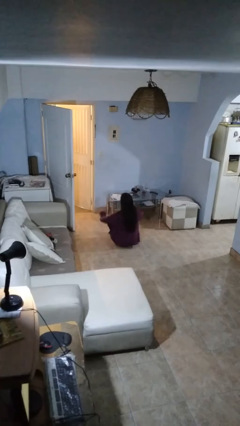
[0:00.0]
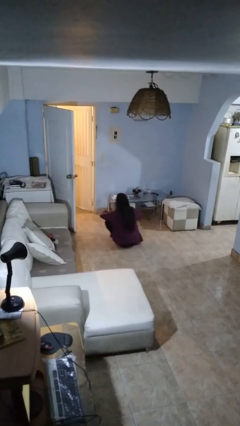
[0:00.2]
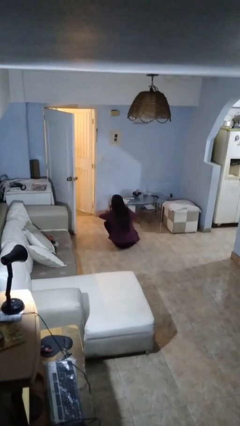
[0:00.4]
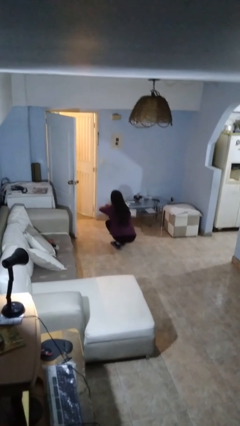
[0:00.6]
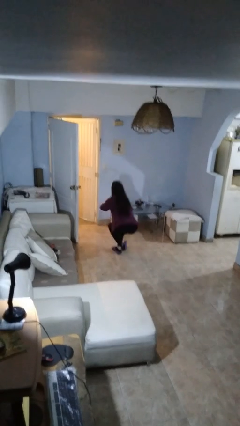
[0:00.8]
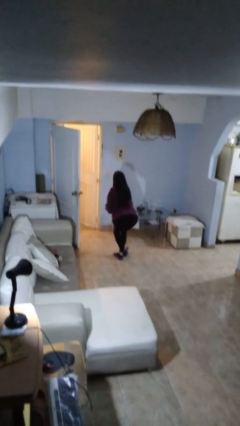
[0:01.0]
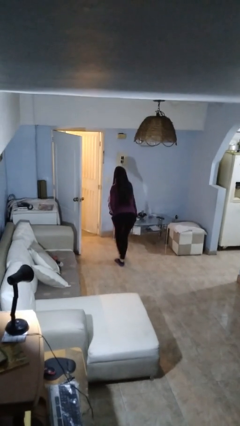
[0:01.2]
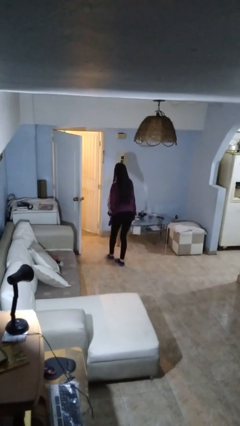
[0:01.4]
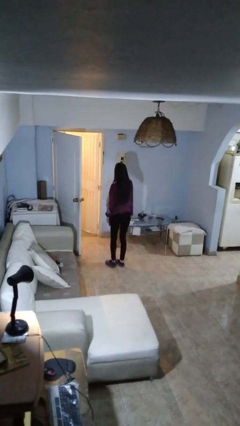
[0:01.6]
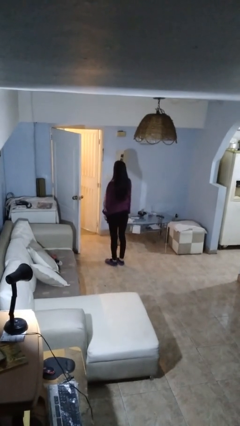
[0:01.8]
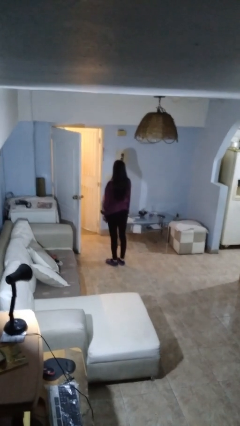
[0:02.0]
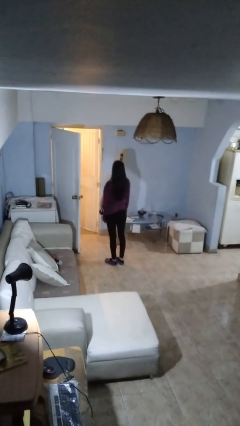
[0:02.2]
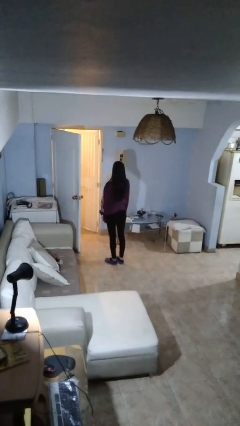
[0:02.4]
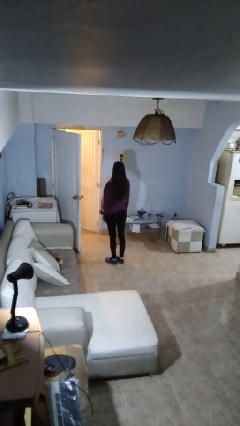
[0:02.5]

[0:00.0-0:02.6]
person stands up from floor

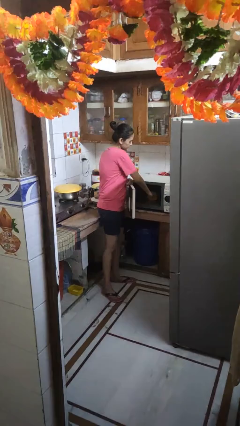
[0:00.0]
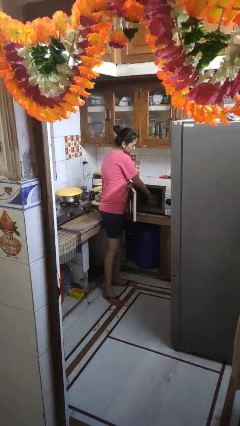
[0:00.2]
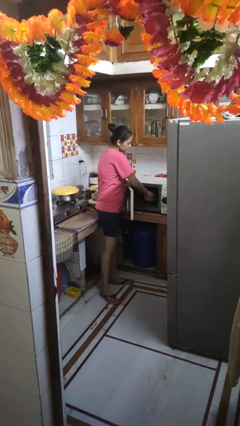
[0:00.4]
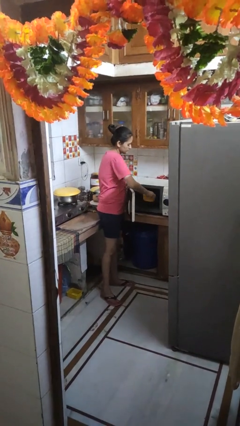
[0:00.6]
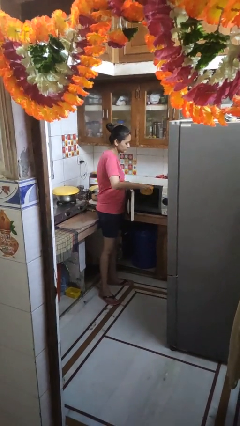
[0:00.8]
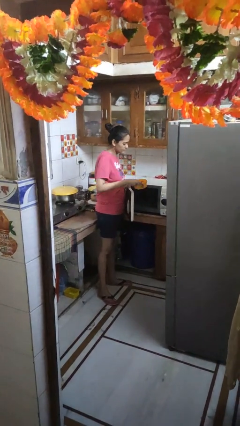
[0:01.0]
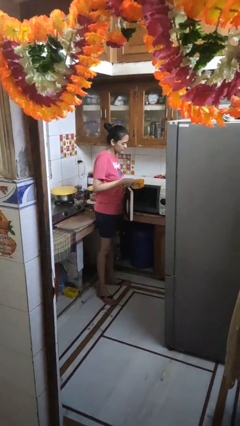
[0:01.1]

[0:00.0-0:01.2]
person takes object from microwave

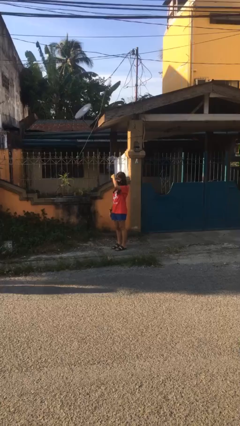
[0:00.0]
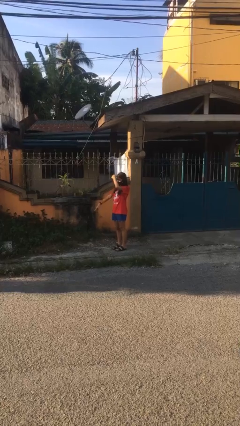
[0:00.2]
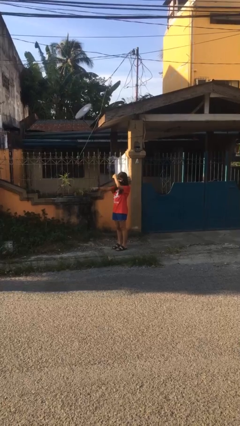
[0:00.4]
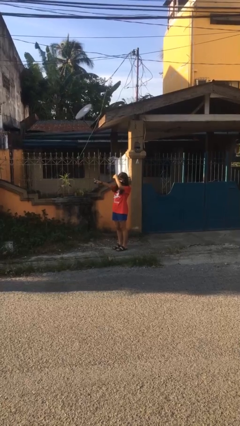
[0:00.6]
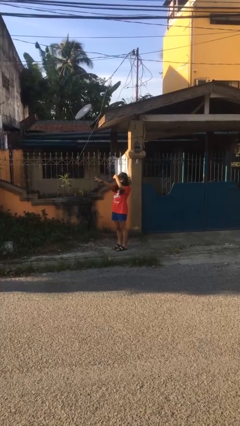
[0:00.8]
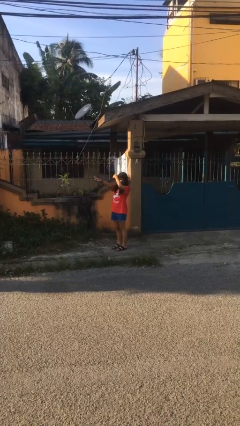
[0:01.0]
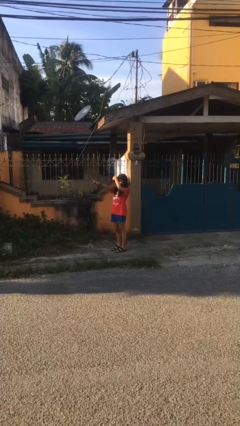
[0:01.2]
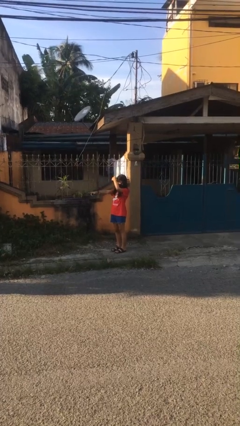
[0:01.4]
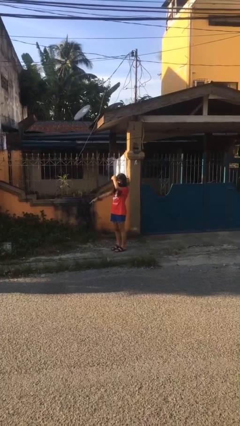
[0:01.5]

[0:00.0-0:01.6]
person points at person

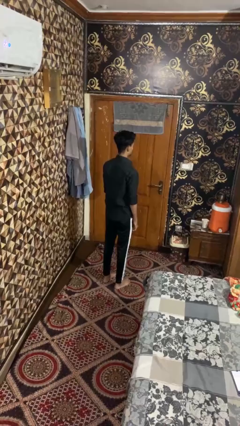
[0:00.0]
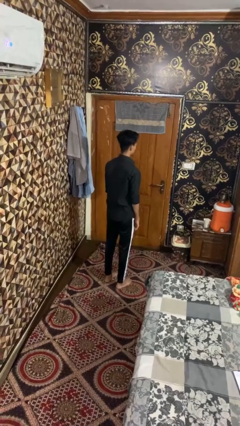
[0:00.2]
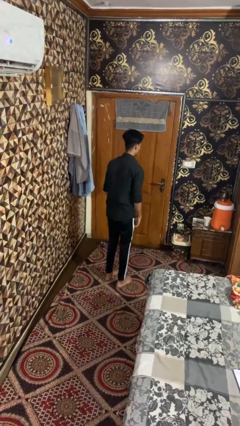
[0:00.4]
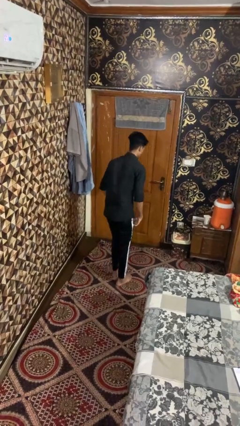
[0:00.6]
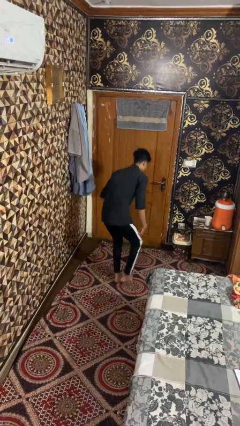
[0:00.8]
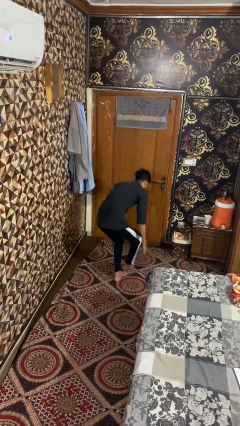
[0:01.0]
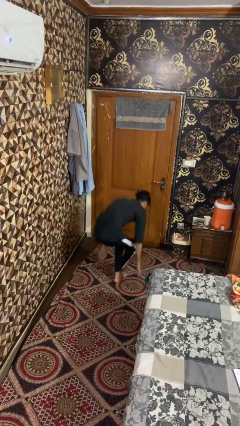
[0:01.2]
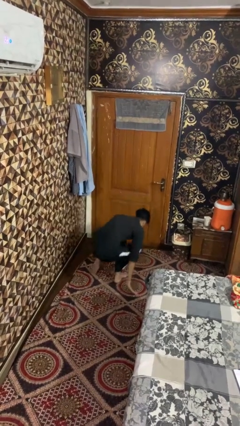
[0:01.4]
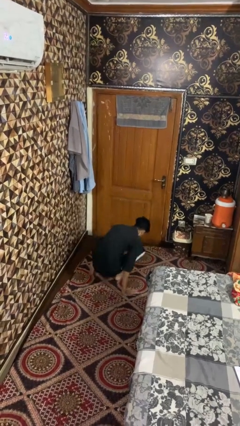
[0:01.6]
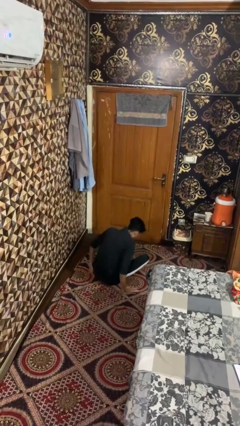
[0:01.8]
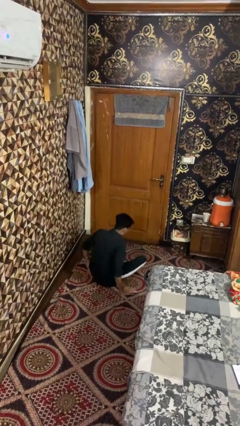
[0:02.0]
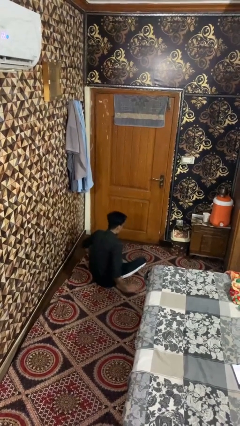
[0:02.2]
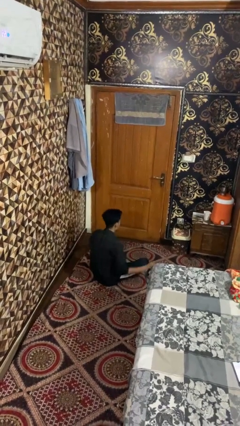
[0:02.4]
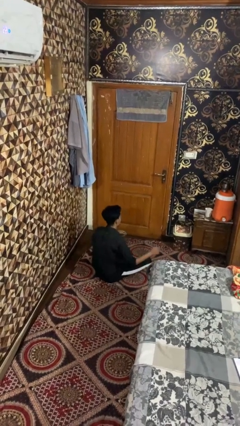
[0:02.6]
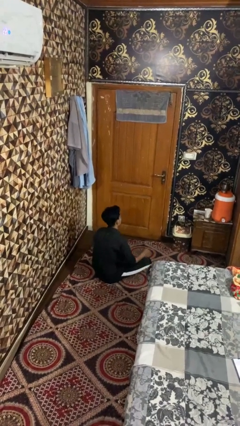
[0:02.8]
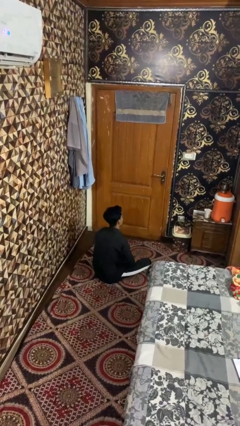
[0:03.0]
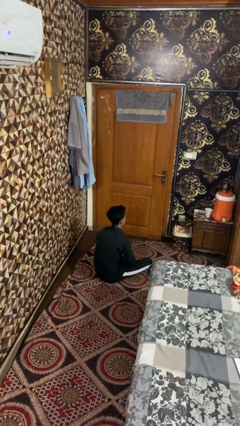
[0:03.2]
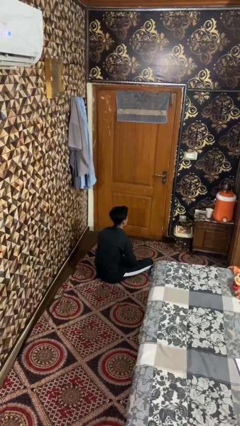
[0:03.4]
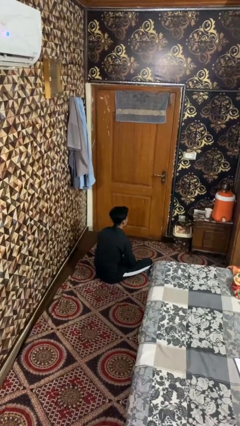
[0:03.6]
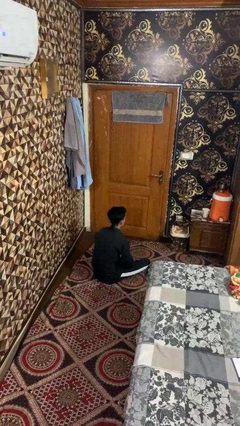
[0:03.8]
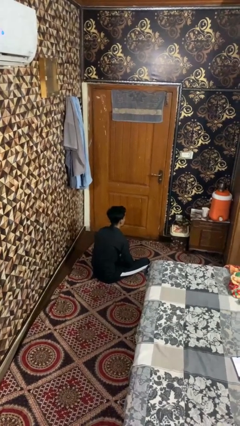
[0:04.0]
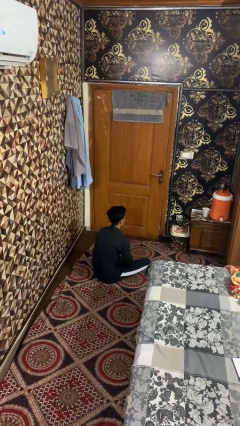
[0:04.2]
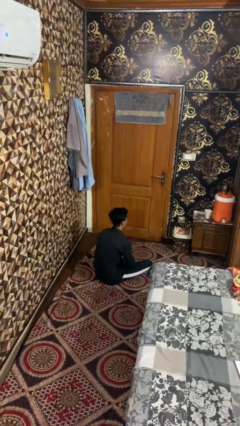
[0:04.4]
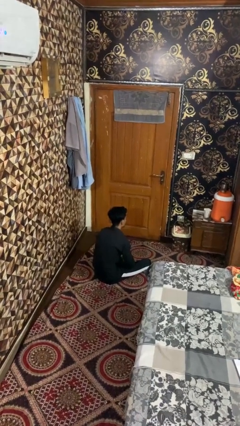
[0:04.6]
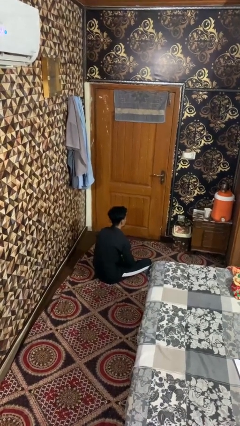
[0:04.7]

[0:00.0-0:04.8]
person sits crisscross

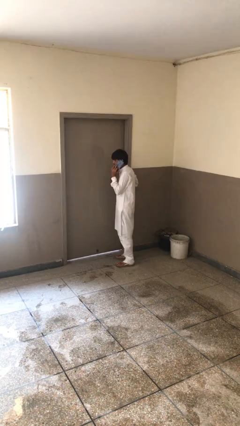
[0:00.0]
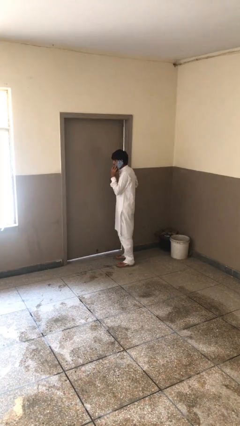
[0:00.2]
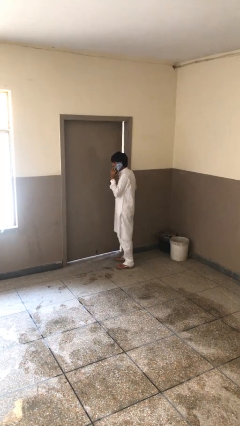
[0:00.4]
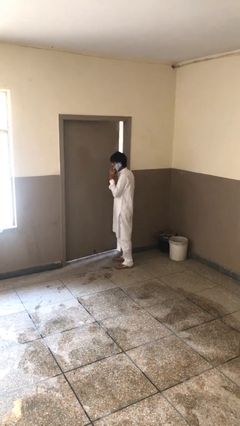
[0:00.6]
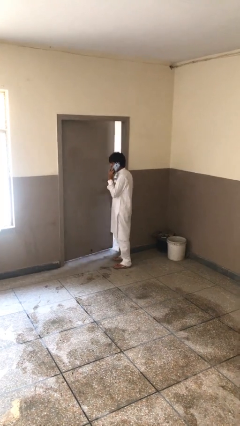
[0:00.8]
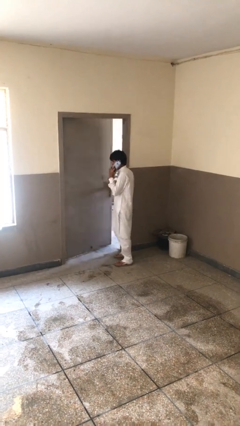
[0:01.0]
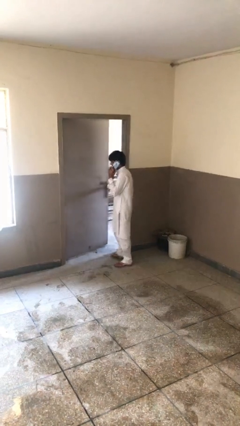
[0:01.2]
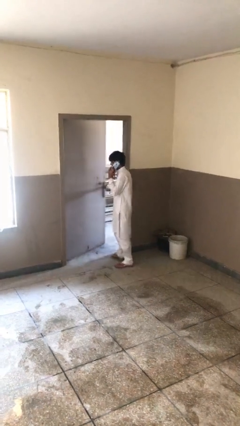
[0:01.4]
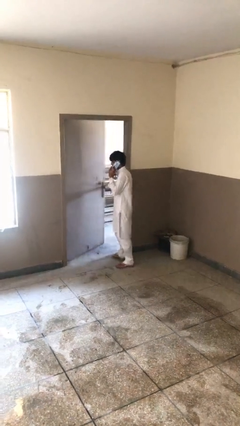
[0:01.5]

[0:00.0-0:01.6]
person opens facility door

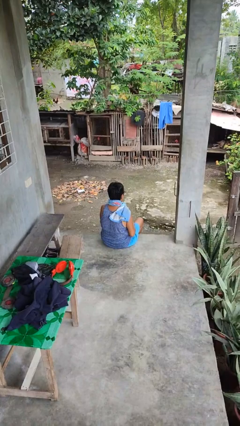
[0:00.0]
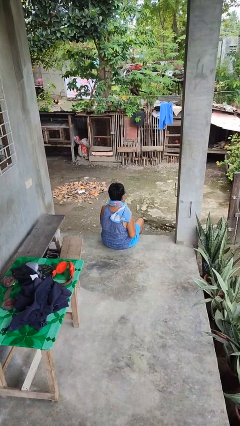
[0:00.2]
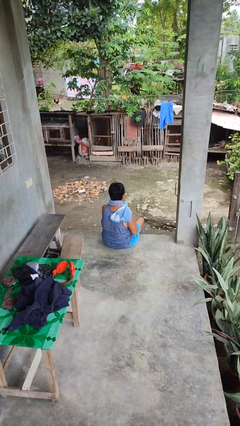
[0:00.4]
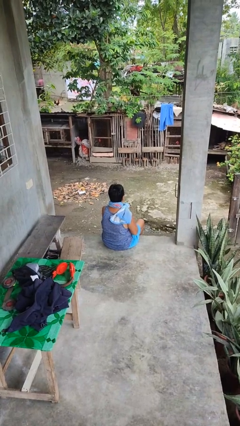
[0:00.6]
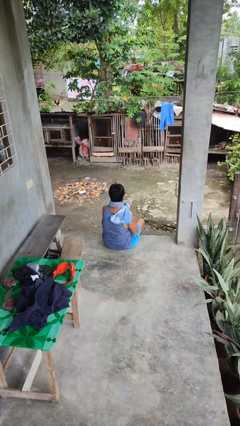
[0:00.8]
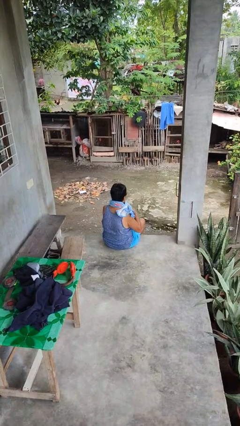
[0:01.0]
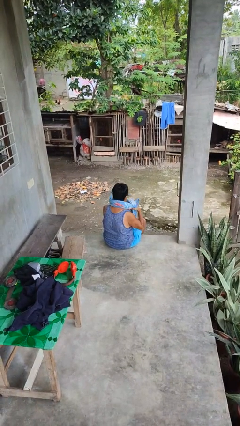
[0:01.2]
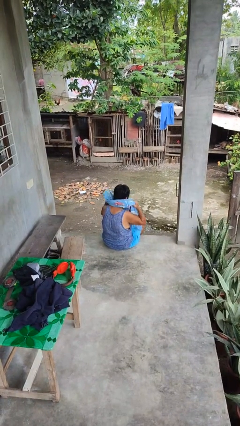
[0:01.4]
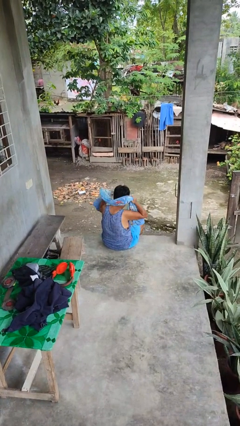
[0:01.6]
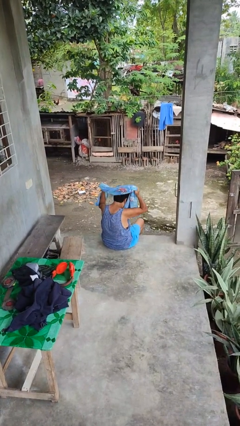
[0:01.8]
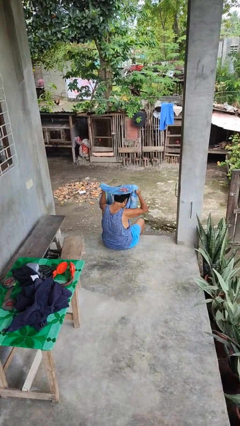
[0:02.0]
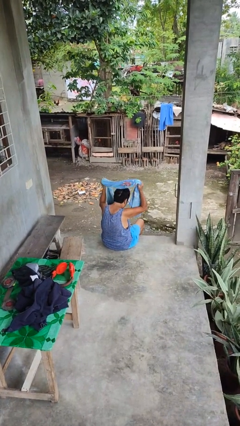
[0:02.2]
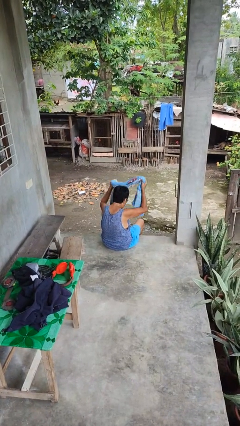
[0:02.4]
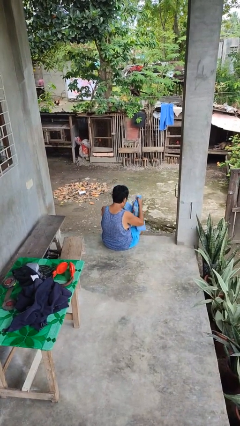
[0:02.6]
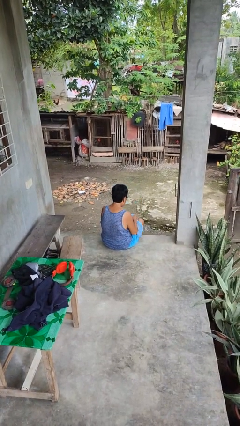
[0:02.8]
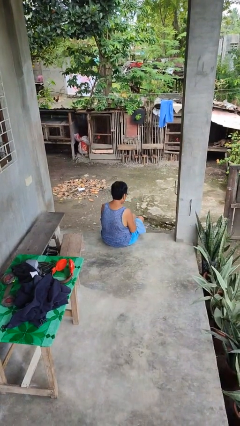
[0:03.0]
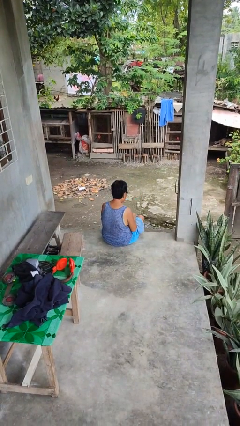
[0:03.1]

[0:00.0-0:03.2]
person takes off scarf

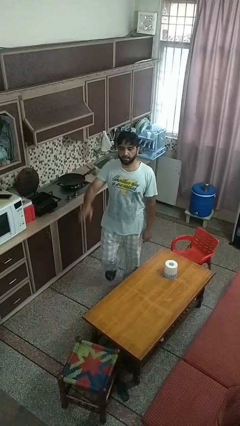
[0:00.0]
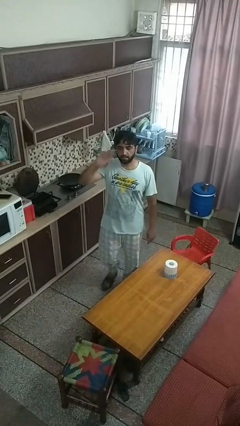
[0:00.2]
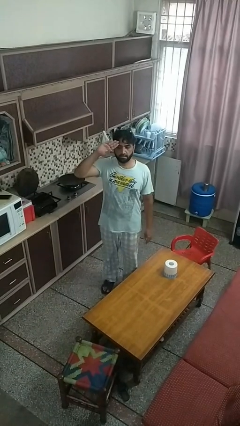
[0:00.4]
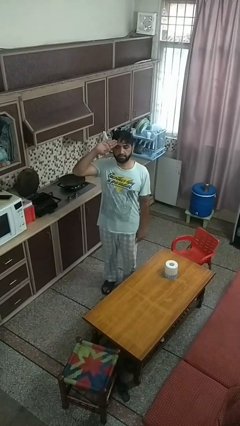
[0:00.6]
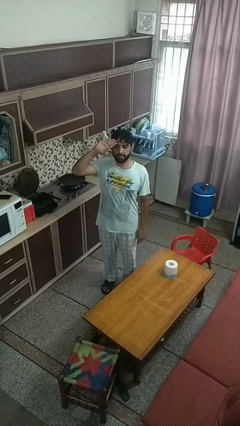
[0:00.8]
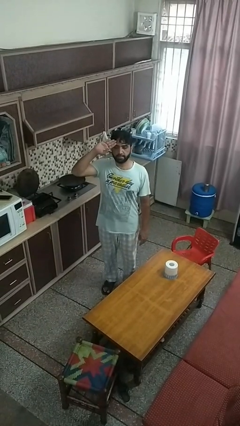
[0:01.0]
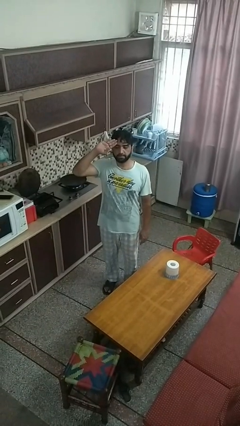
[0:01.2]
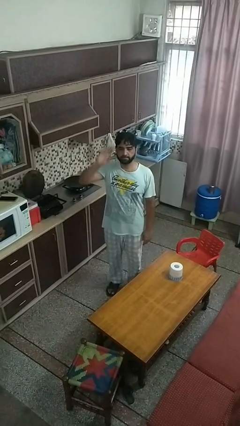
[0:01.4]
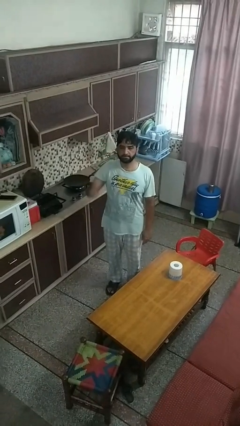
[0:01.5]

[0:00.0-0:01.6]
person salutes

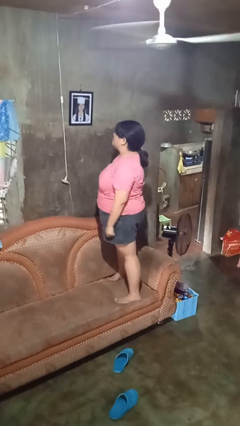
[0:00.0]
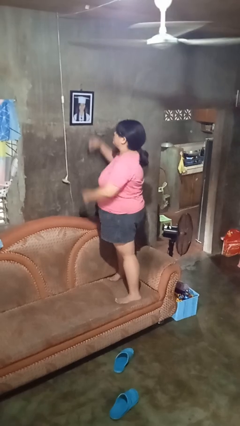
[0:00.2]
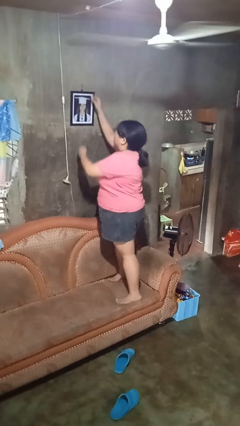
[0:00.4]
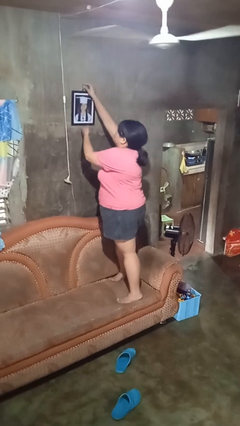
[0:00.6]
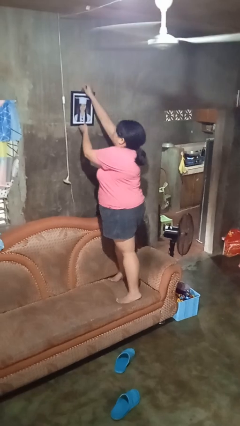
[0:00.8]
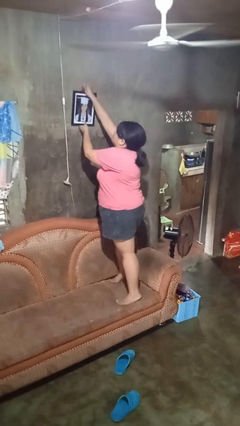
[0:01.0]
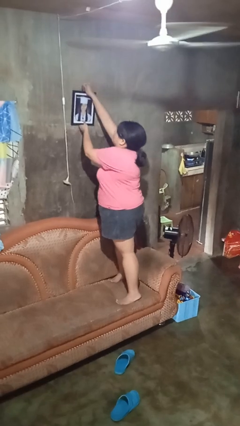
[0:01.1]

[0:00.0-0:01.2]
person takes down picture frame
